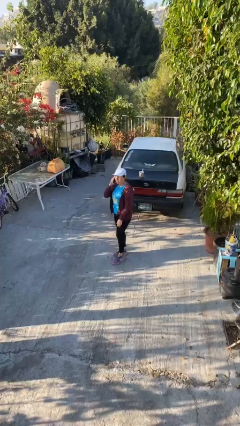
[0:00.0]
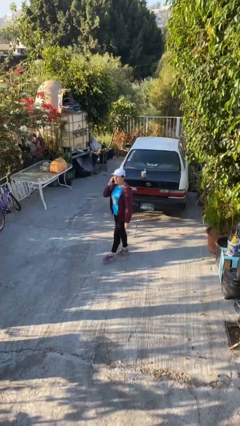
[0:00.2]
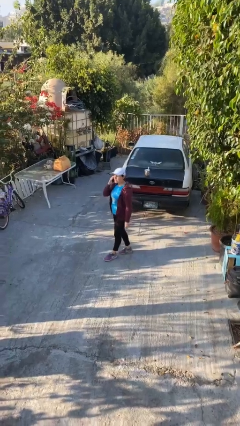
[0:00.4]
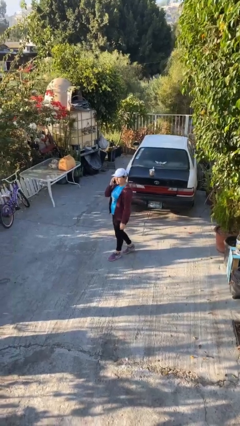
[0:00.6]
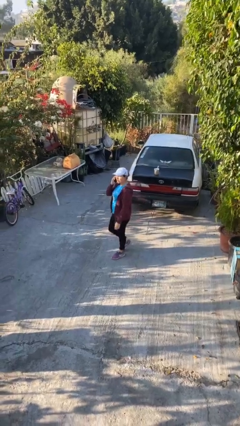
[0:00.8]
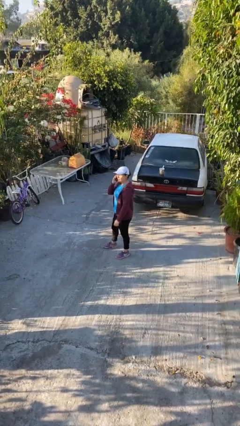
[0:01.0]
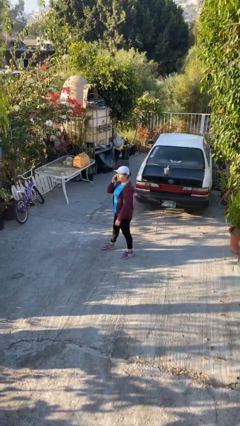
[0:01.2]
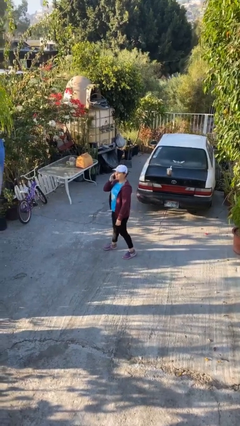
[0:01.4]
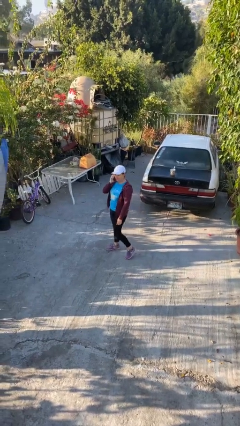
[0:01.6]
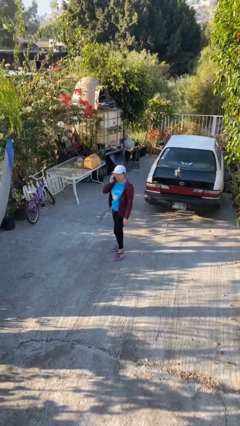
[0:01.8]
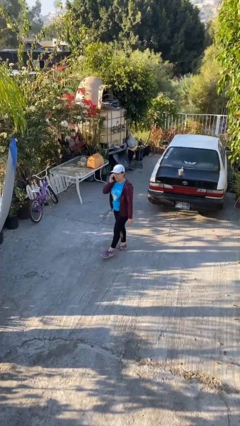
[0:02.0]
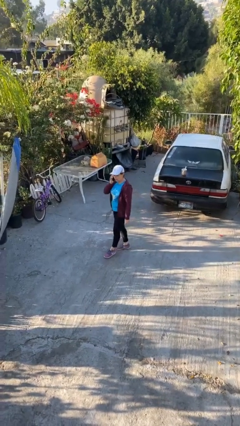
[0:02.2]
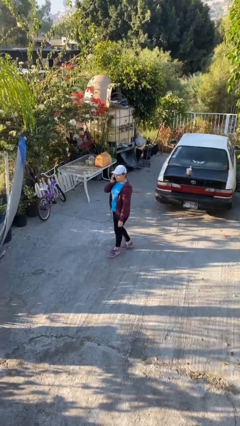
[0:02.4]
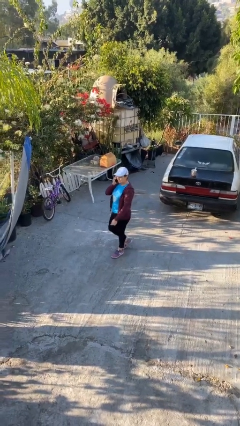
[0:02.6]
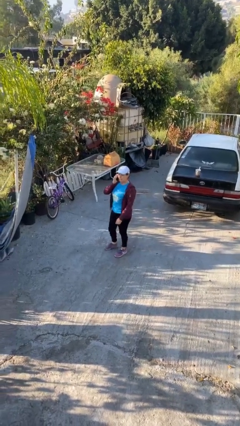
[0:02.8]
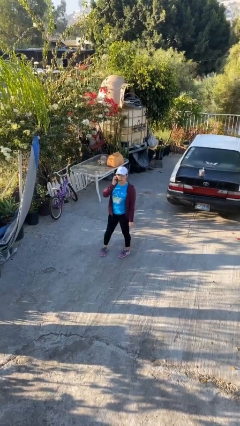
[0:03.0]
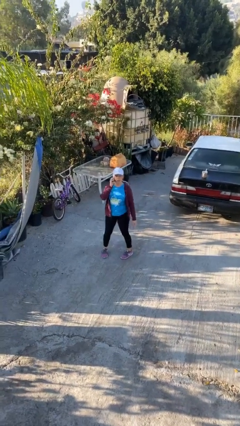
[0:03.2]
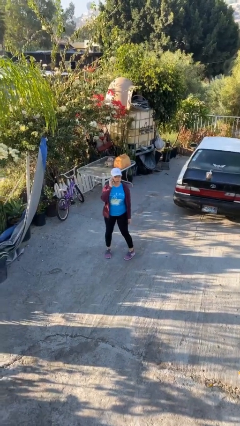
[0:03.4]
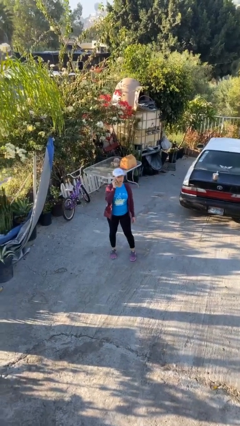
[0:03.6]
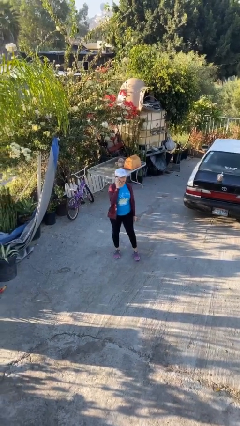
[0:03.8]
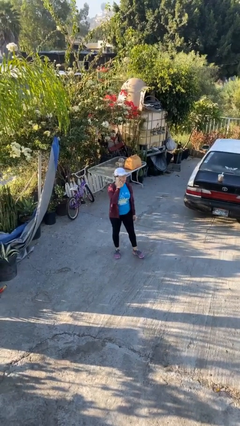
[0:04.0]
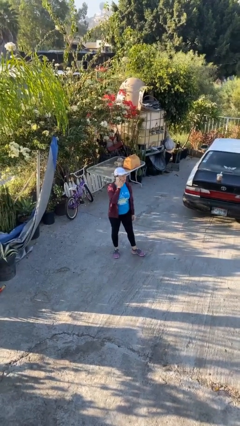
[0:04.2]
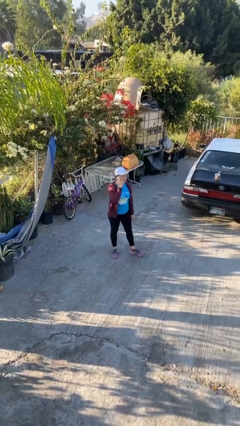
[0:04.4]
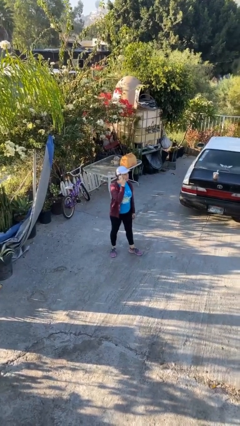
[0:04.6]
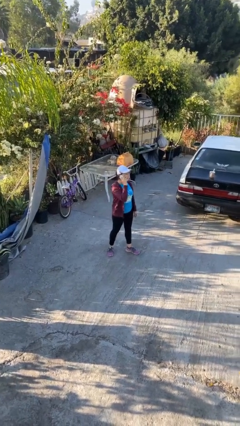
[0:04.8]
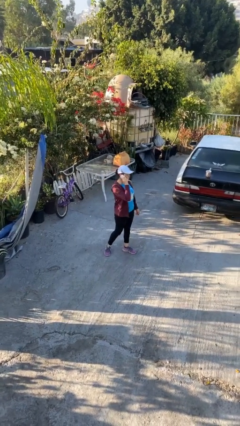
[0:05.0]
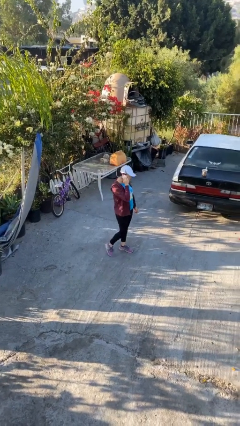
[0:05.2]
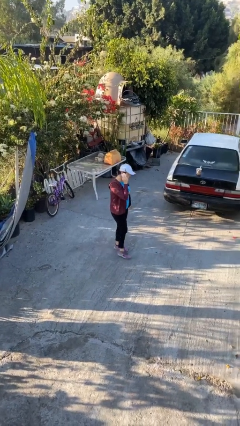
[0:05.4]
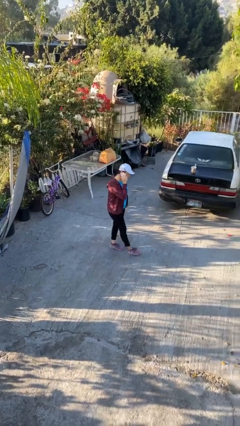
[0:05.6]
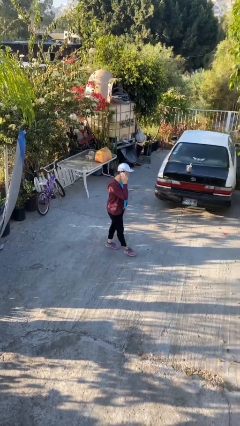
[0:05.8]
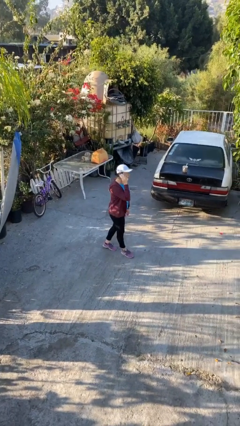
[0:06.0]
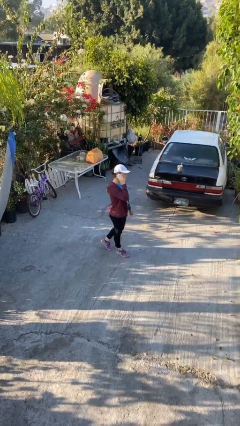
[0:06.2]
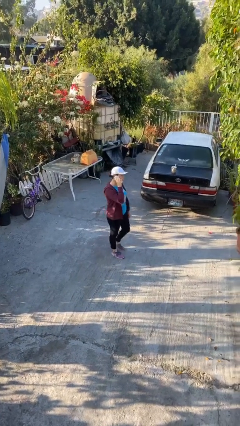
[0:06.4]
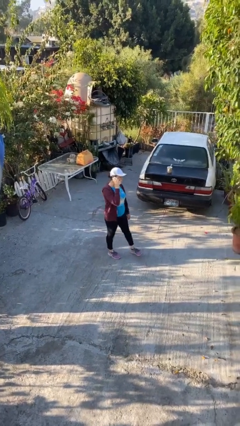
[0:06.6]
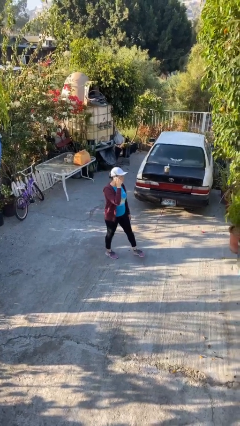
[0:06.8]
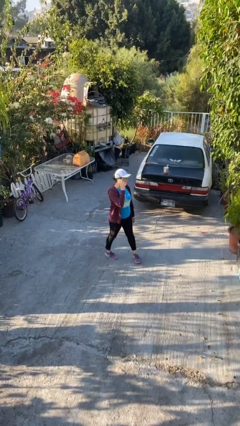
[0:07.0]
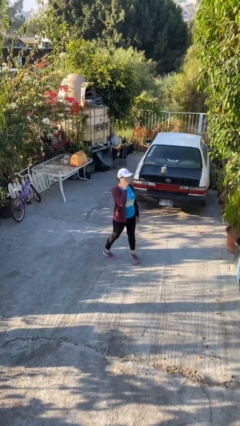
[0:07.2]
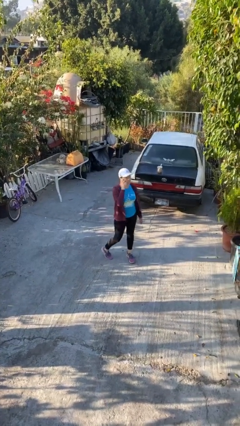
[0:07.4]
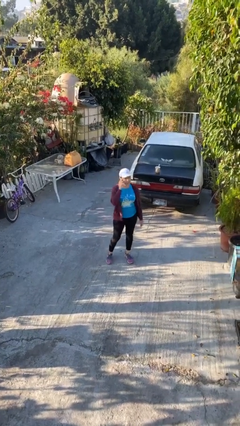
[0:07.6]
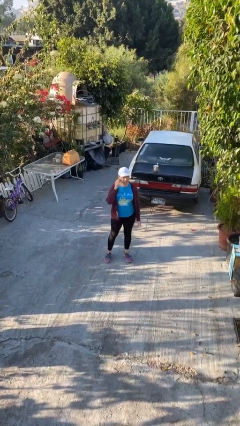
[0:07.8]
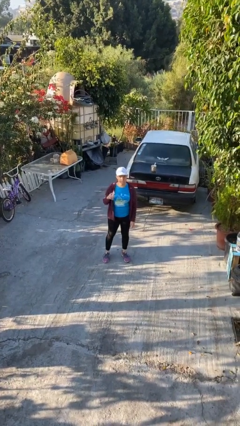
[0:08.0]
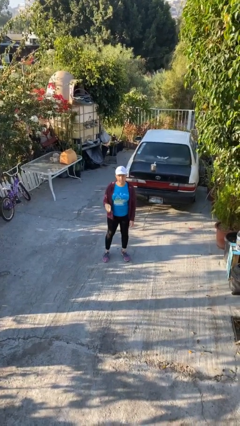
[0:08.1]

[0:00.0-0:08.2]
person talks on phone

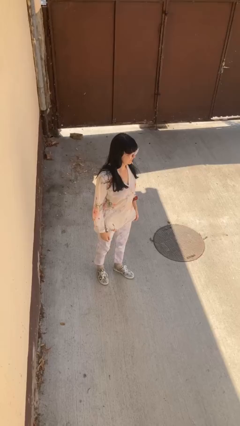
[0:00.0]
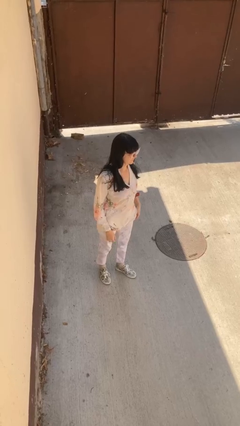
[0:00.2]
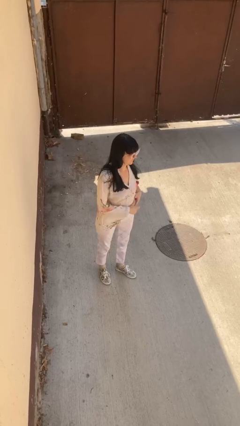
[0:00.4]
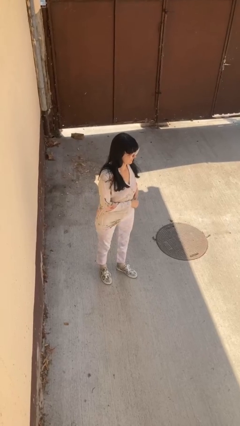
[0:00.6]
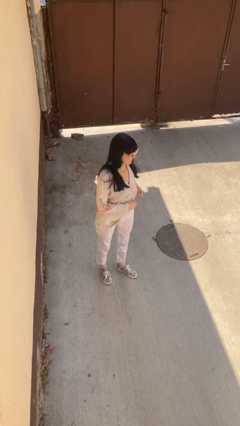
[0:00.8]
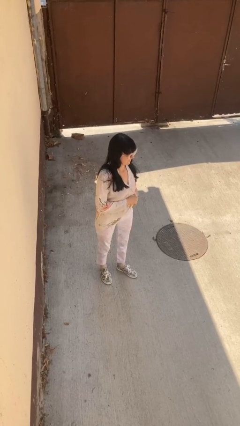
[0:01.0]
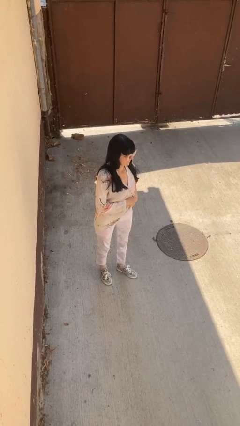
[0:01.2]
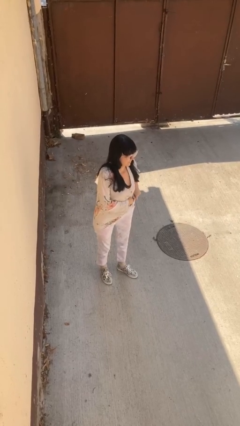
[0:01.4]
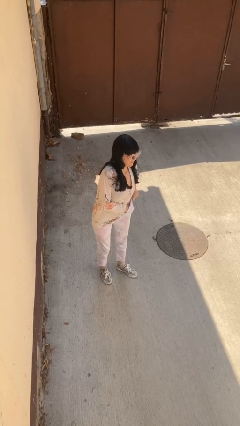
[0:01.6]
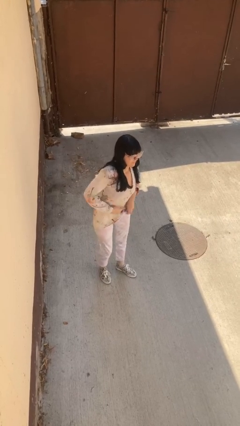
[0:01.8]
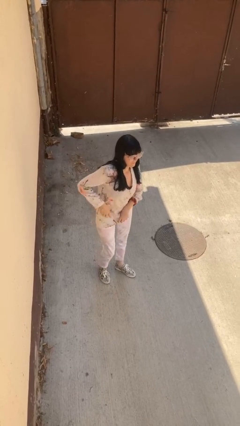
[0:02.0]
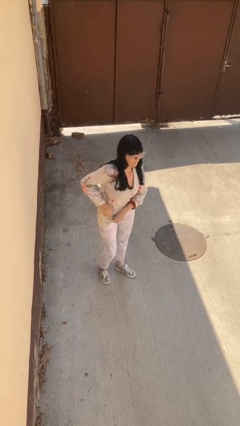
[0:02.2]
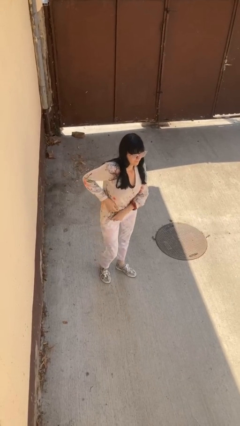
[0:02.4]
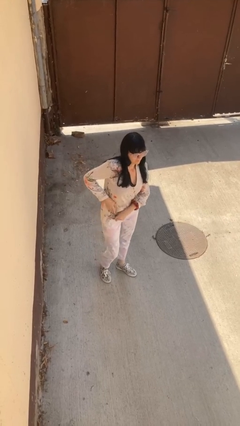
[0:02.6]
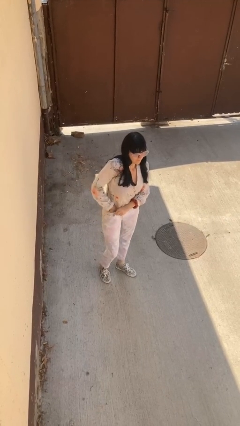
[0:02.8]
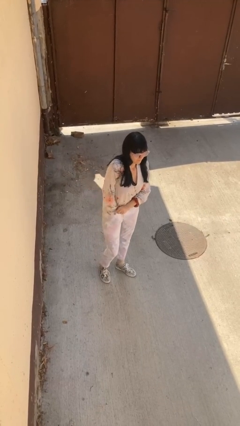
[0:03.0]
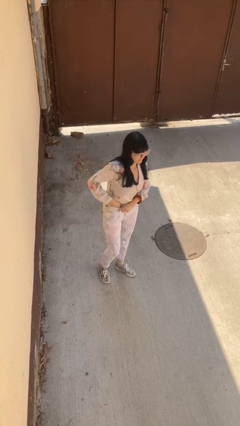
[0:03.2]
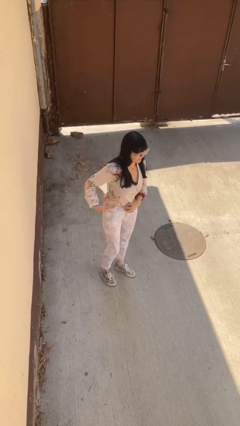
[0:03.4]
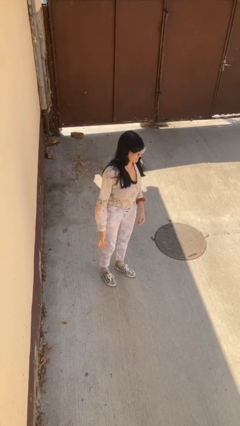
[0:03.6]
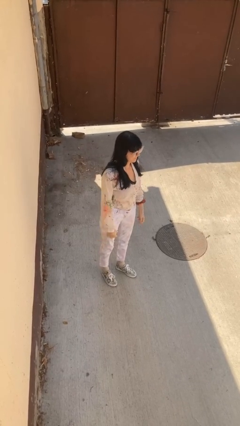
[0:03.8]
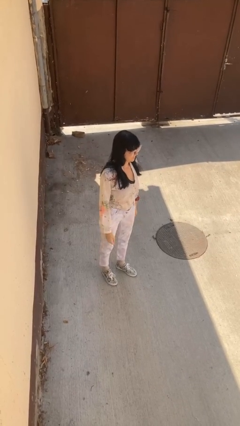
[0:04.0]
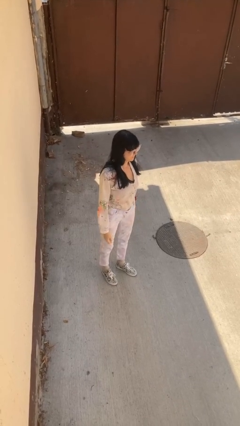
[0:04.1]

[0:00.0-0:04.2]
person tucks in shirt

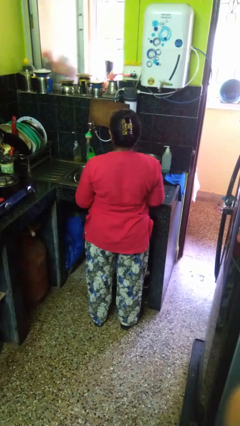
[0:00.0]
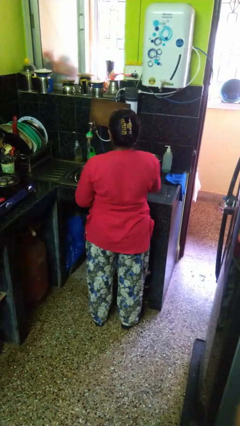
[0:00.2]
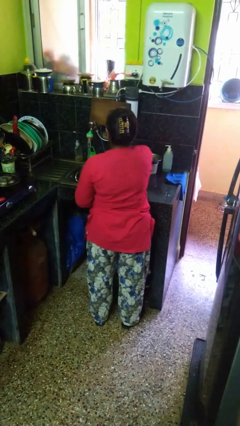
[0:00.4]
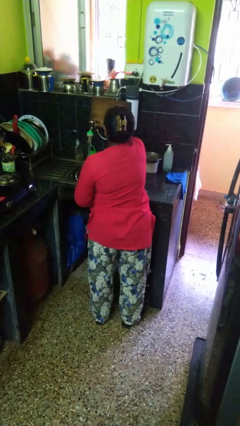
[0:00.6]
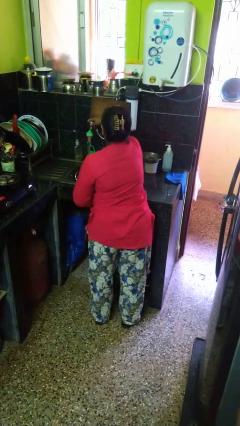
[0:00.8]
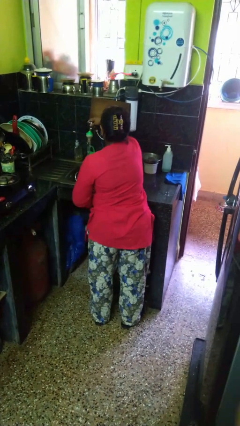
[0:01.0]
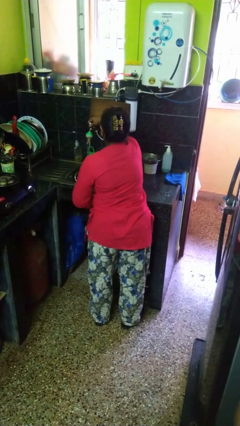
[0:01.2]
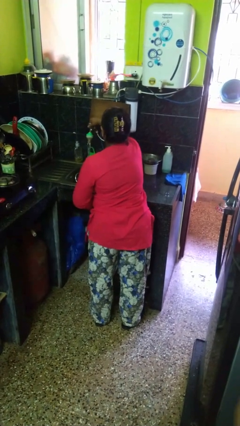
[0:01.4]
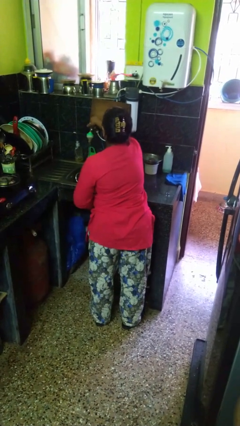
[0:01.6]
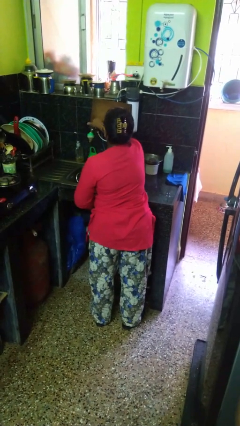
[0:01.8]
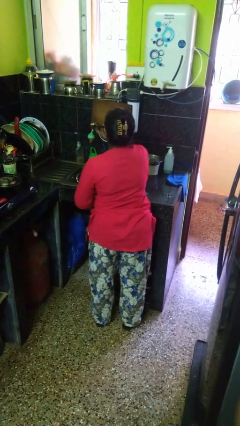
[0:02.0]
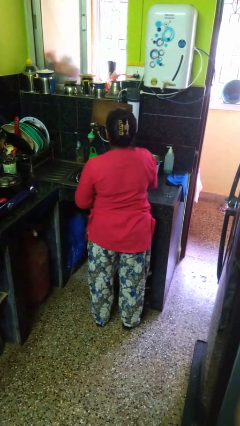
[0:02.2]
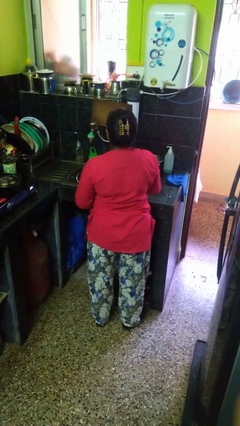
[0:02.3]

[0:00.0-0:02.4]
person turns off faucet

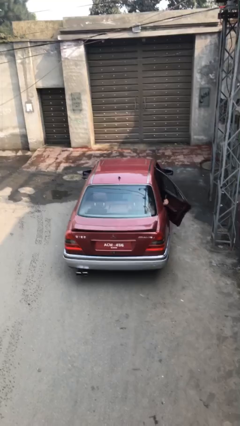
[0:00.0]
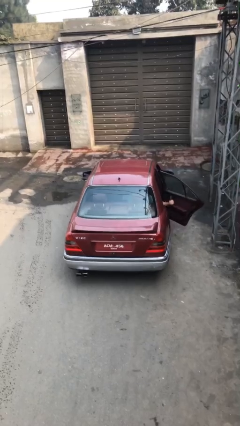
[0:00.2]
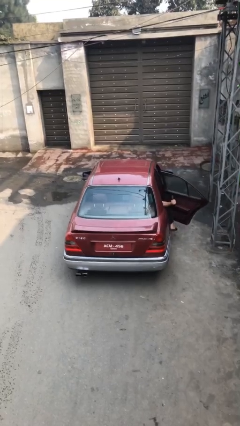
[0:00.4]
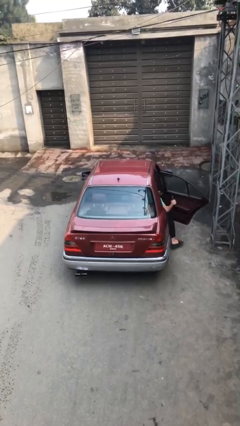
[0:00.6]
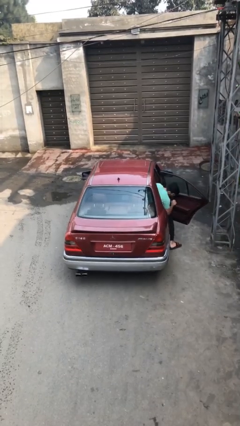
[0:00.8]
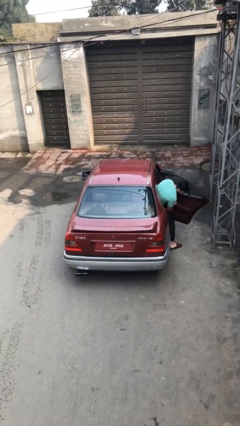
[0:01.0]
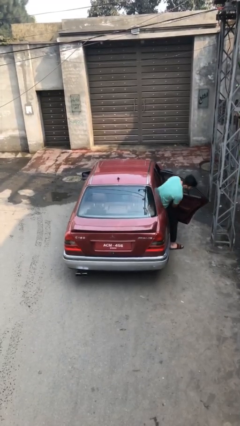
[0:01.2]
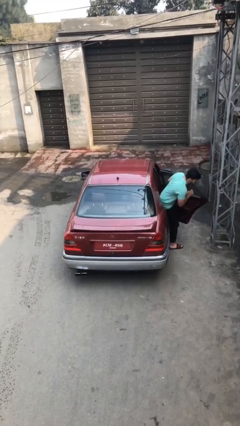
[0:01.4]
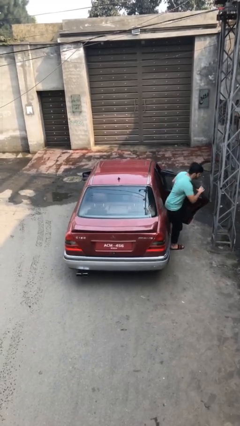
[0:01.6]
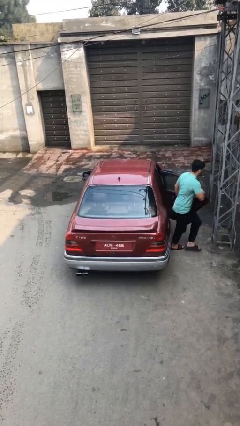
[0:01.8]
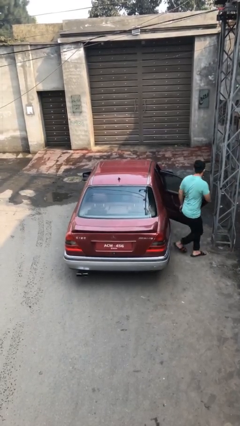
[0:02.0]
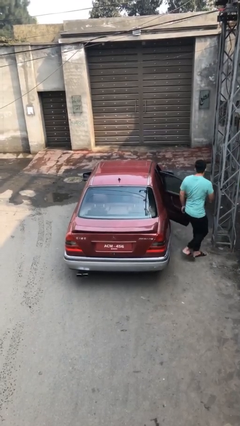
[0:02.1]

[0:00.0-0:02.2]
car drops off person

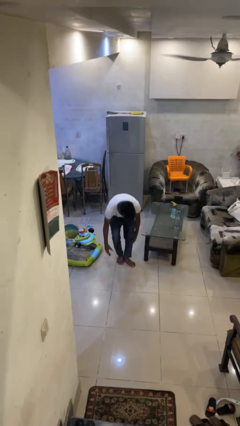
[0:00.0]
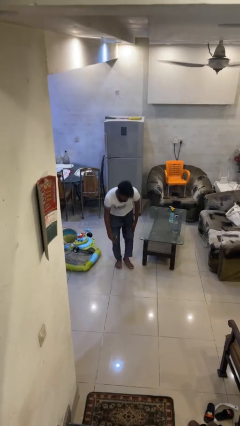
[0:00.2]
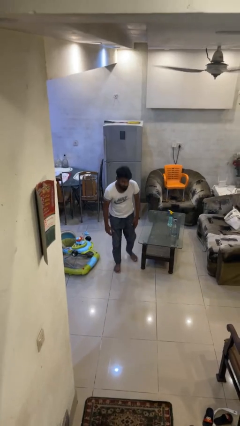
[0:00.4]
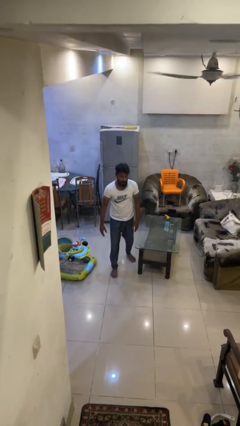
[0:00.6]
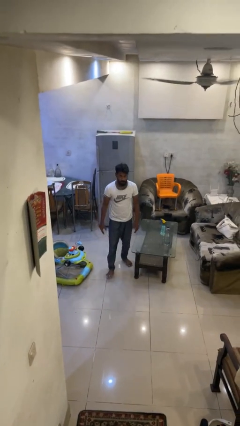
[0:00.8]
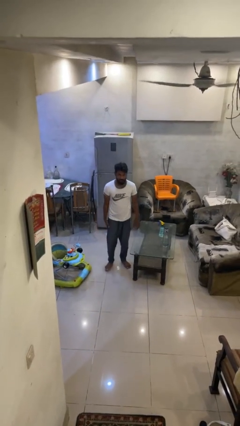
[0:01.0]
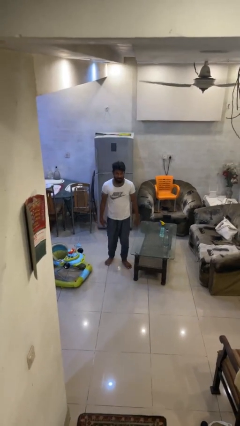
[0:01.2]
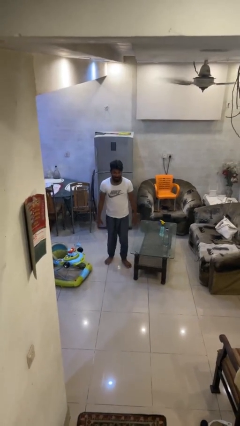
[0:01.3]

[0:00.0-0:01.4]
person stands up from floor
